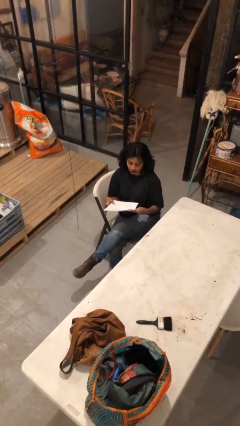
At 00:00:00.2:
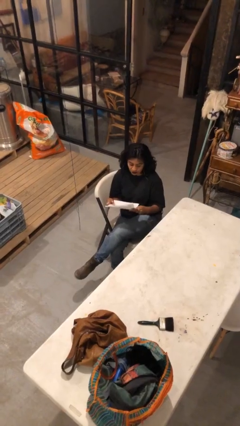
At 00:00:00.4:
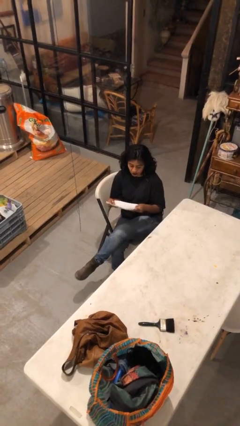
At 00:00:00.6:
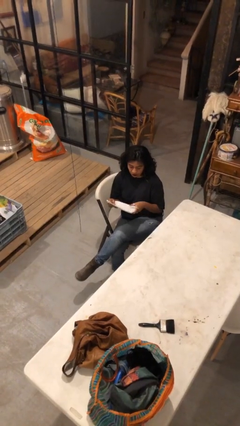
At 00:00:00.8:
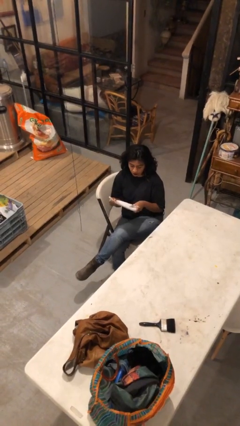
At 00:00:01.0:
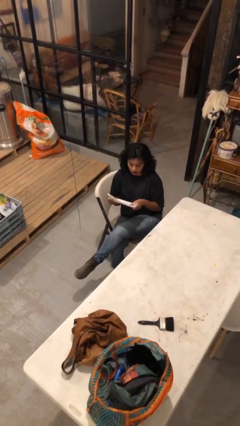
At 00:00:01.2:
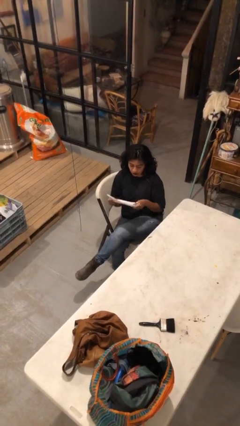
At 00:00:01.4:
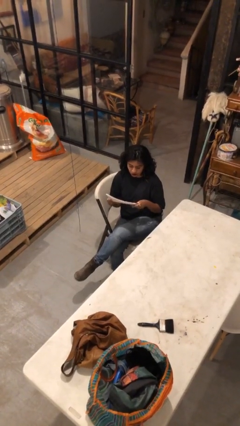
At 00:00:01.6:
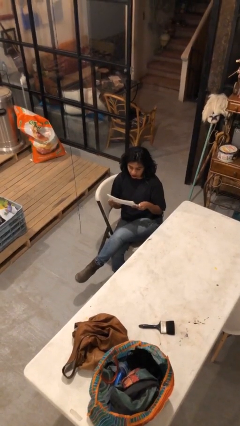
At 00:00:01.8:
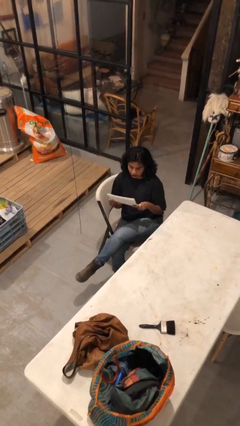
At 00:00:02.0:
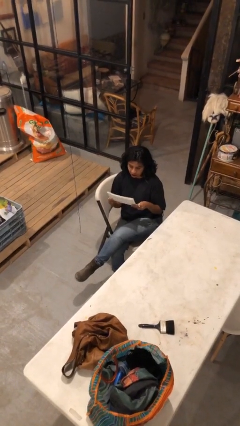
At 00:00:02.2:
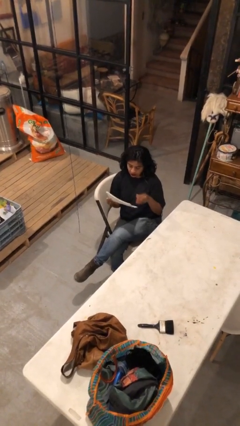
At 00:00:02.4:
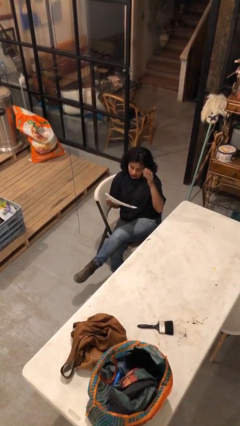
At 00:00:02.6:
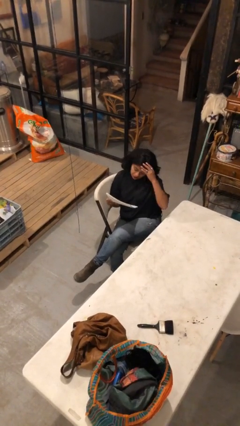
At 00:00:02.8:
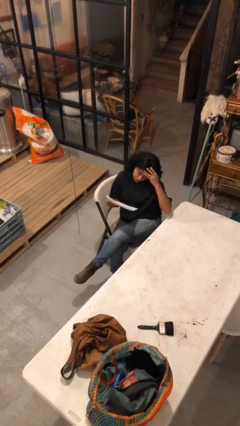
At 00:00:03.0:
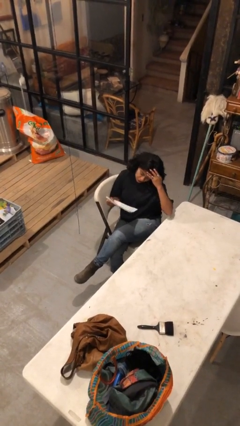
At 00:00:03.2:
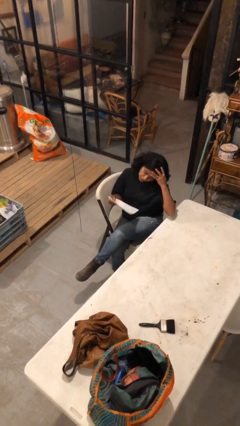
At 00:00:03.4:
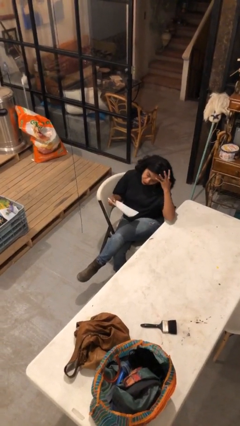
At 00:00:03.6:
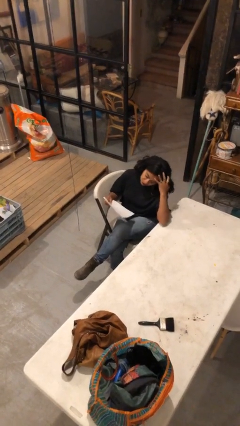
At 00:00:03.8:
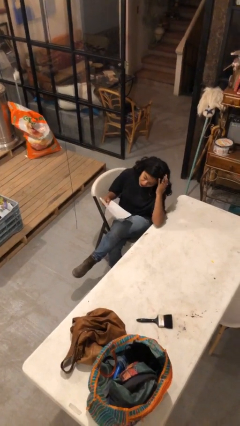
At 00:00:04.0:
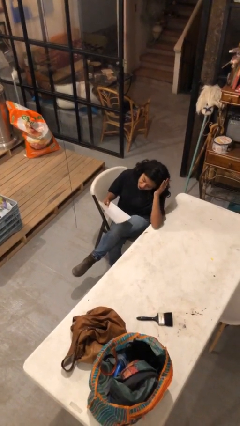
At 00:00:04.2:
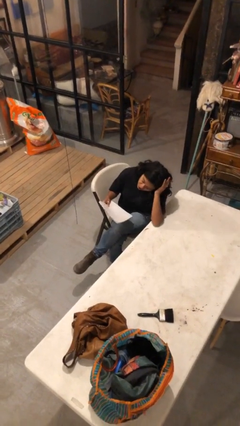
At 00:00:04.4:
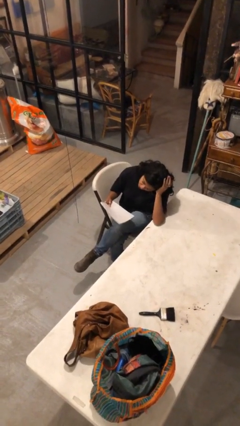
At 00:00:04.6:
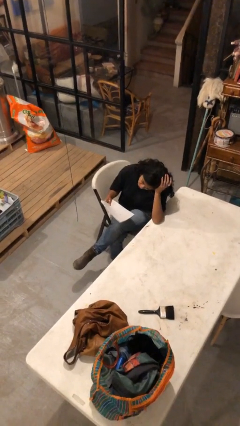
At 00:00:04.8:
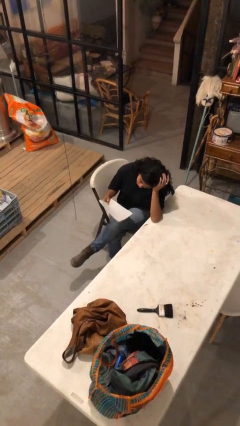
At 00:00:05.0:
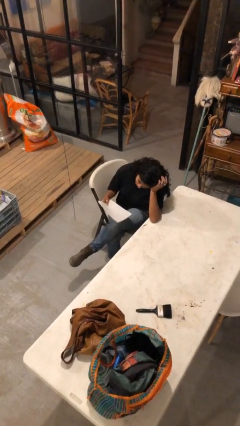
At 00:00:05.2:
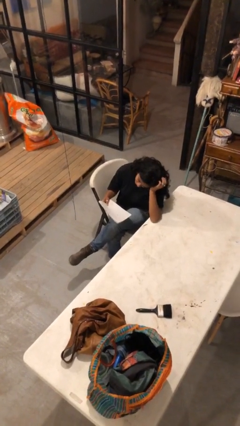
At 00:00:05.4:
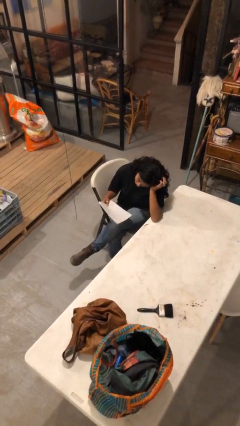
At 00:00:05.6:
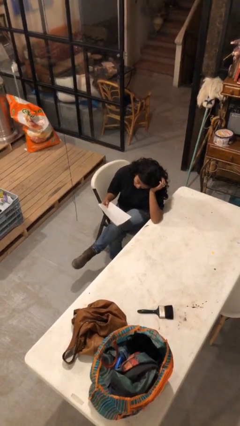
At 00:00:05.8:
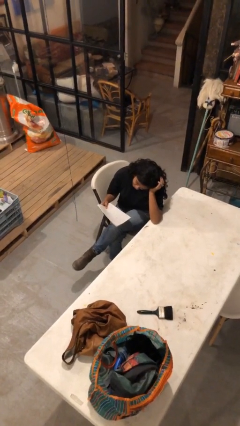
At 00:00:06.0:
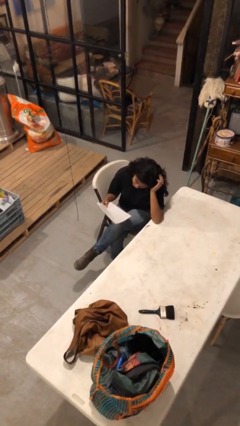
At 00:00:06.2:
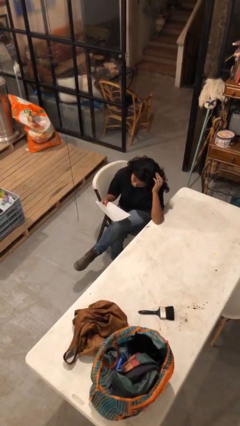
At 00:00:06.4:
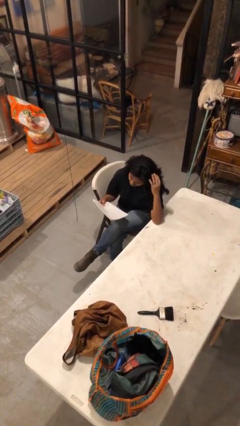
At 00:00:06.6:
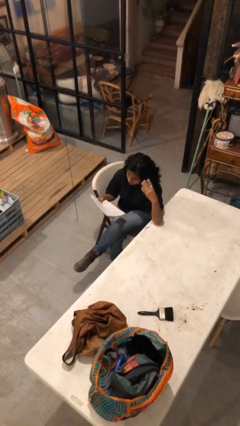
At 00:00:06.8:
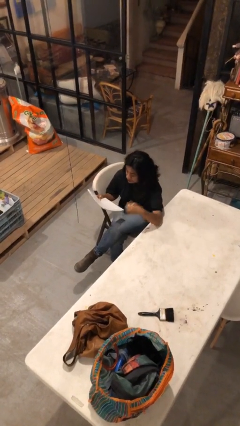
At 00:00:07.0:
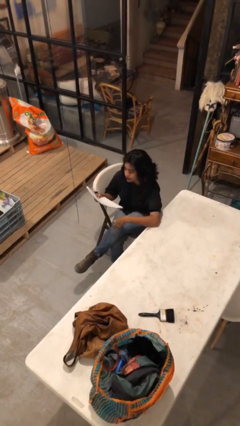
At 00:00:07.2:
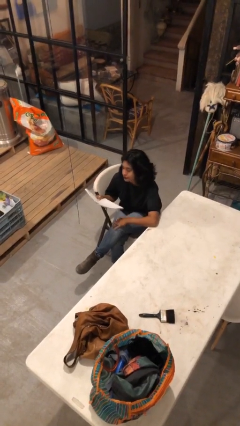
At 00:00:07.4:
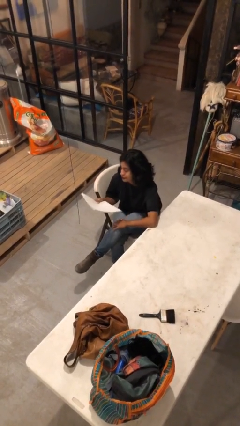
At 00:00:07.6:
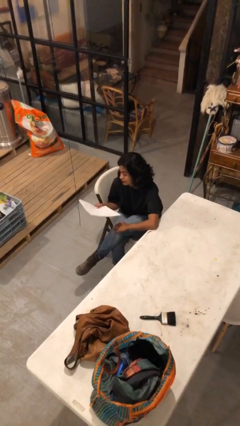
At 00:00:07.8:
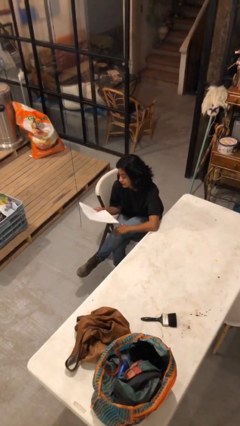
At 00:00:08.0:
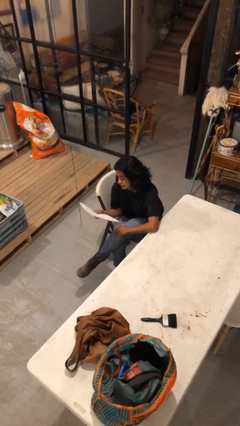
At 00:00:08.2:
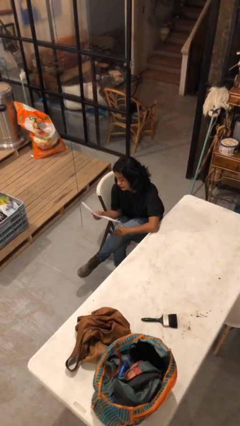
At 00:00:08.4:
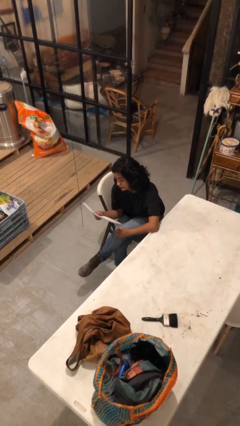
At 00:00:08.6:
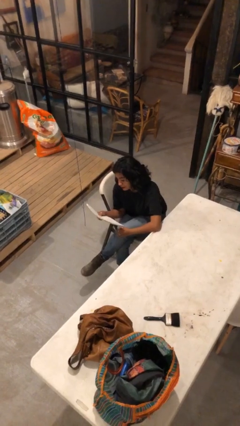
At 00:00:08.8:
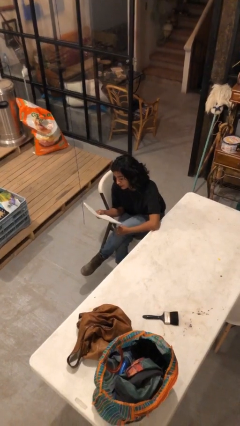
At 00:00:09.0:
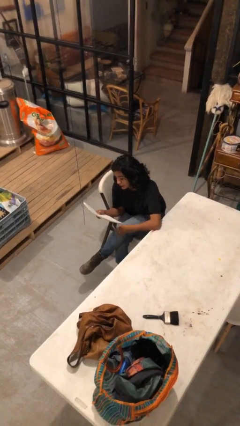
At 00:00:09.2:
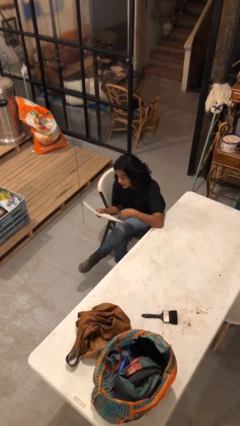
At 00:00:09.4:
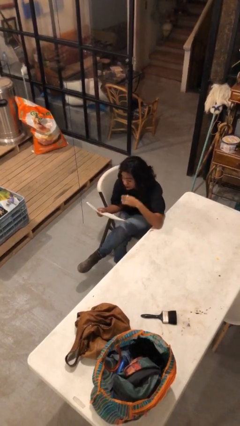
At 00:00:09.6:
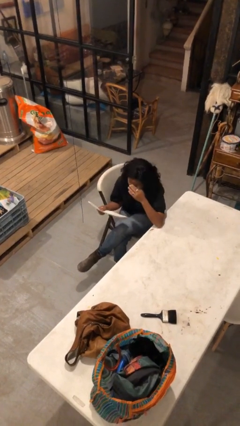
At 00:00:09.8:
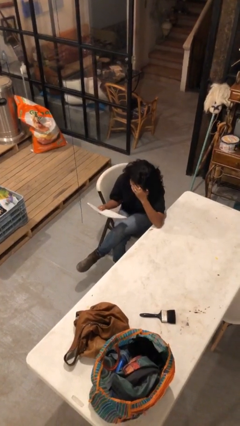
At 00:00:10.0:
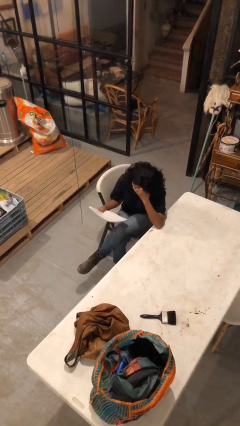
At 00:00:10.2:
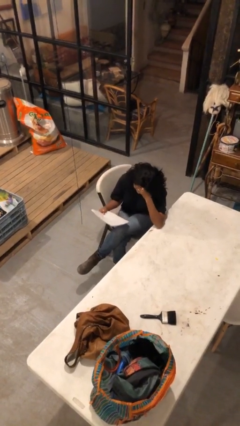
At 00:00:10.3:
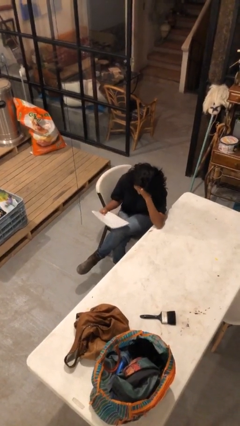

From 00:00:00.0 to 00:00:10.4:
person reads document

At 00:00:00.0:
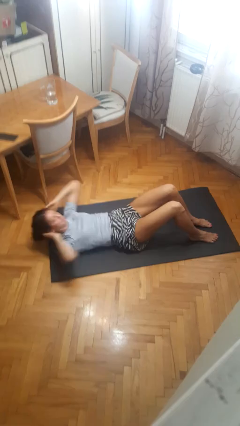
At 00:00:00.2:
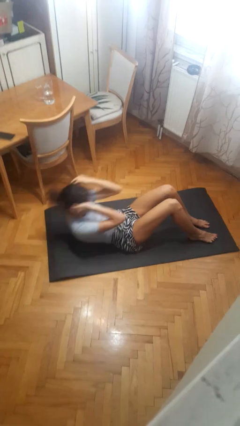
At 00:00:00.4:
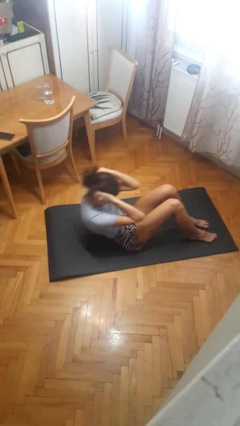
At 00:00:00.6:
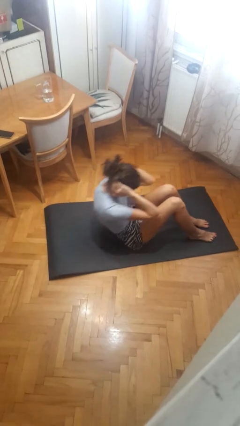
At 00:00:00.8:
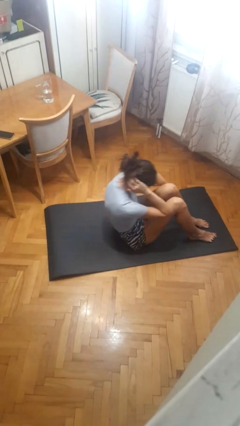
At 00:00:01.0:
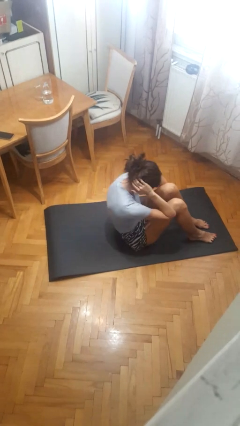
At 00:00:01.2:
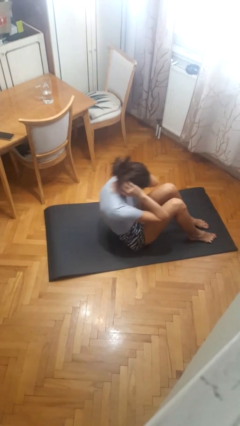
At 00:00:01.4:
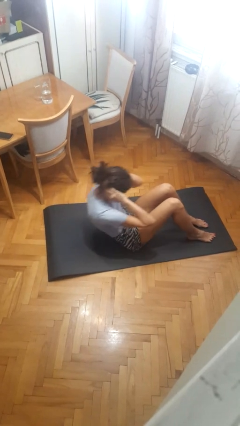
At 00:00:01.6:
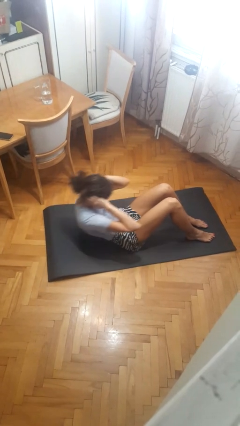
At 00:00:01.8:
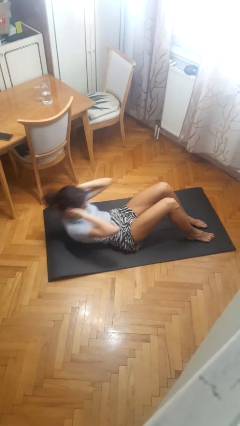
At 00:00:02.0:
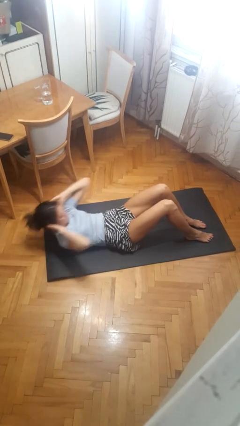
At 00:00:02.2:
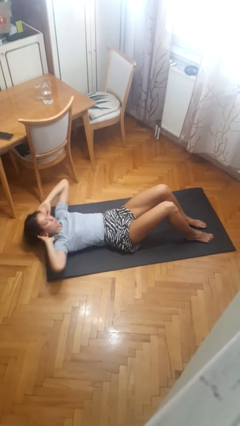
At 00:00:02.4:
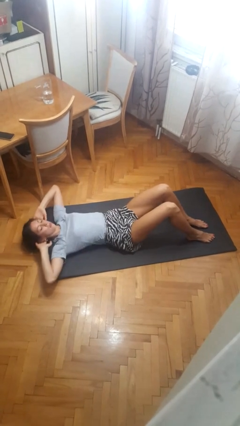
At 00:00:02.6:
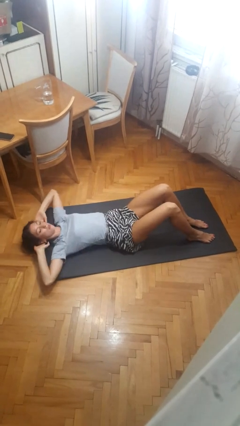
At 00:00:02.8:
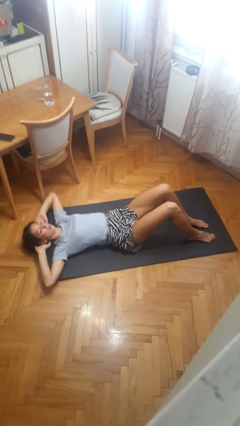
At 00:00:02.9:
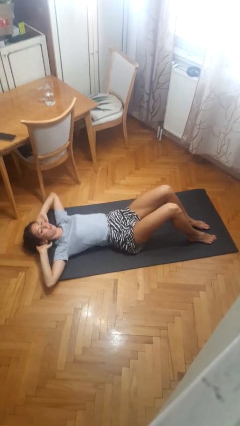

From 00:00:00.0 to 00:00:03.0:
person exercises with situp

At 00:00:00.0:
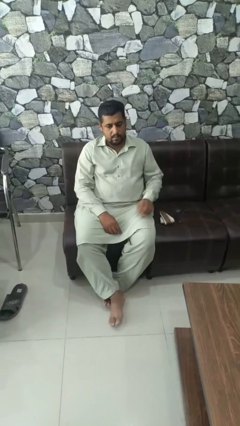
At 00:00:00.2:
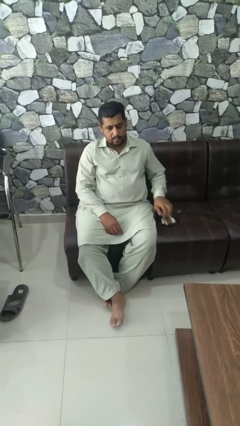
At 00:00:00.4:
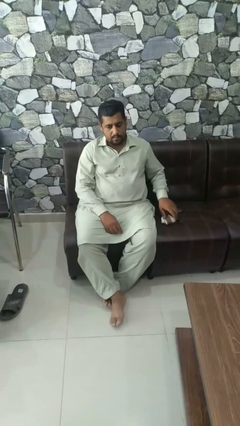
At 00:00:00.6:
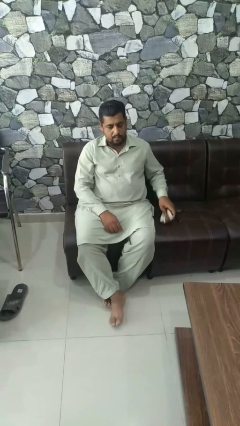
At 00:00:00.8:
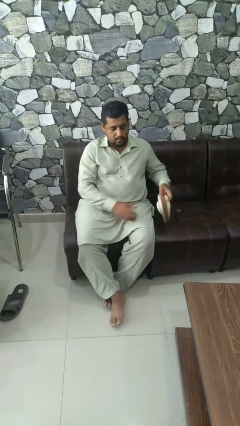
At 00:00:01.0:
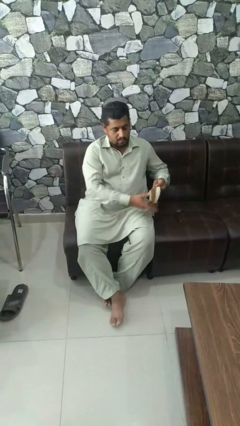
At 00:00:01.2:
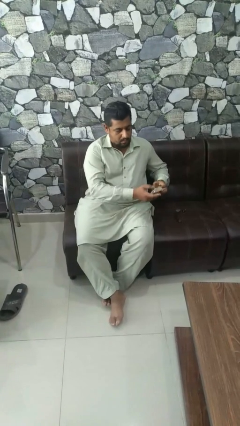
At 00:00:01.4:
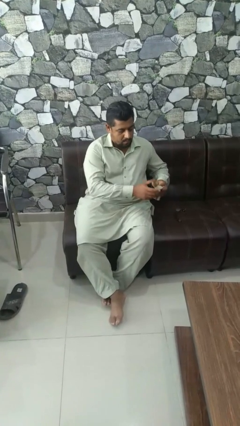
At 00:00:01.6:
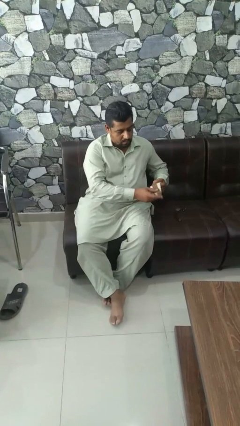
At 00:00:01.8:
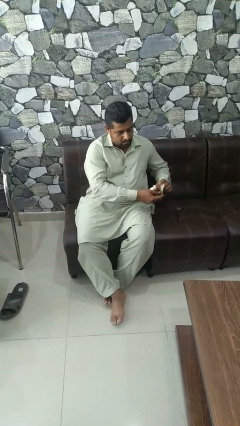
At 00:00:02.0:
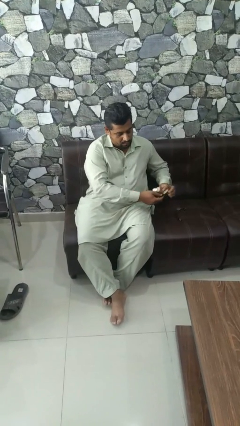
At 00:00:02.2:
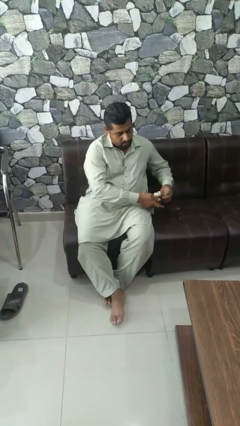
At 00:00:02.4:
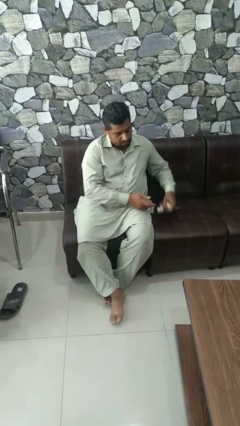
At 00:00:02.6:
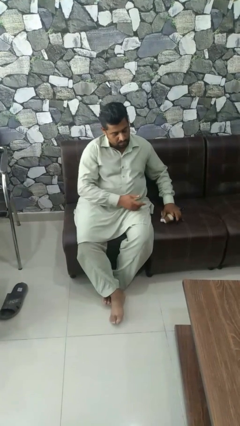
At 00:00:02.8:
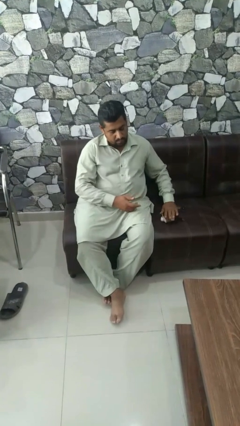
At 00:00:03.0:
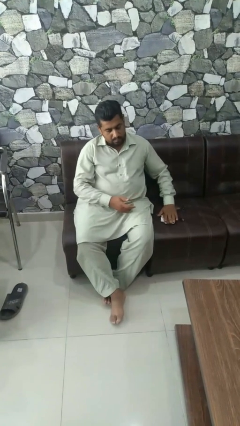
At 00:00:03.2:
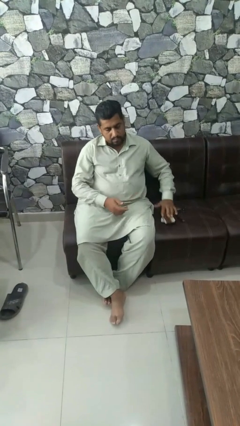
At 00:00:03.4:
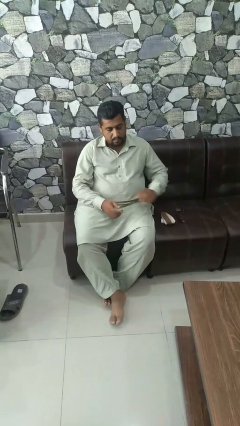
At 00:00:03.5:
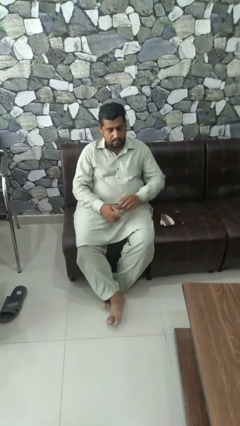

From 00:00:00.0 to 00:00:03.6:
person folds socks

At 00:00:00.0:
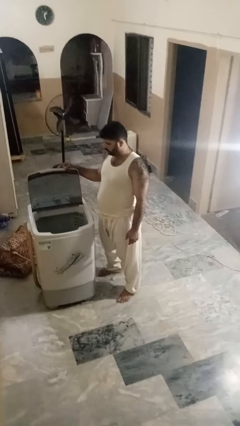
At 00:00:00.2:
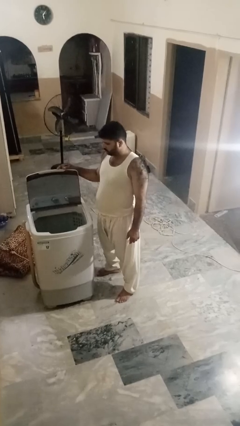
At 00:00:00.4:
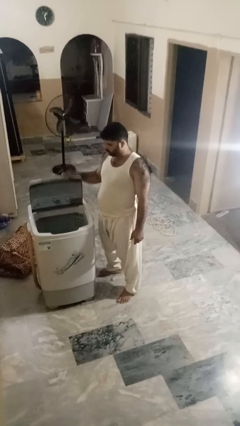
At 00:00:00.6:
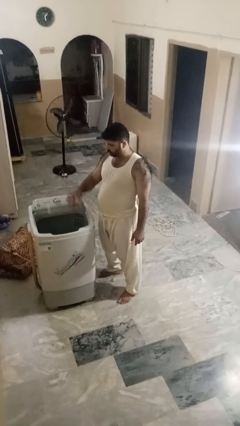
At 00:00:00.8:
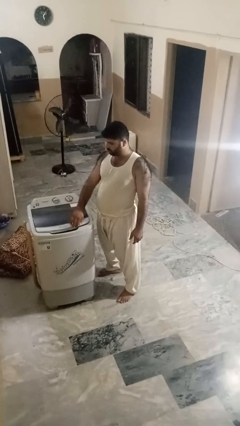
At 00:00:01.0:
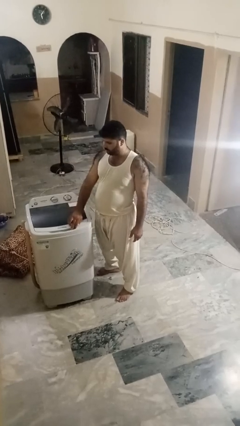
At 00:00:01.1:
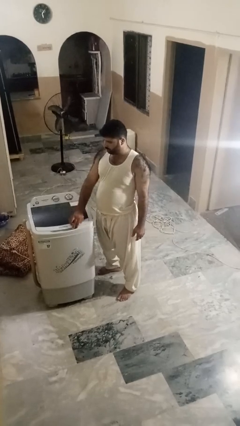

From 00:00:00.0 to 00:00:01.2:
person closes clothes washer
